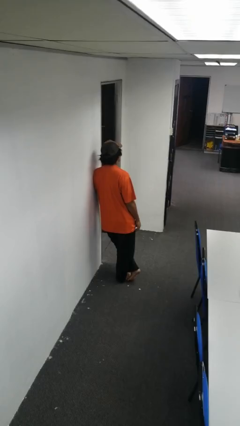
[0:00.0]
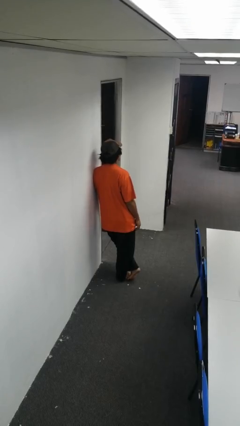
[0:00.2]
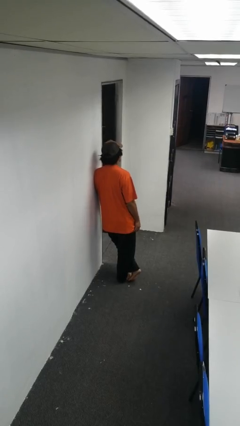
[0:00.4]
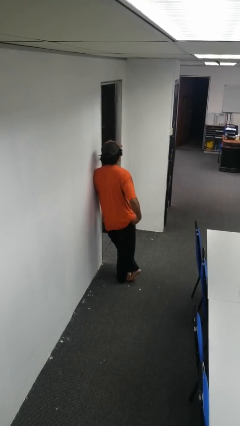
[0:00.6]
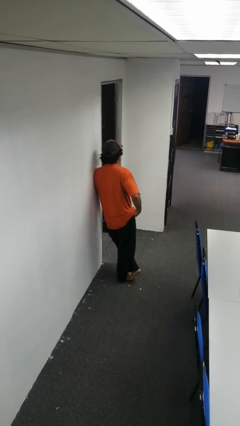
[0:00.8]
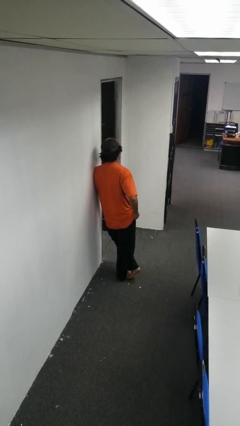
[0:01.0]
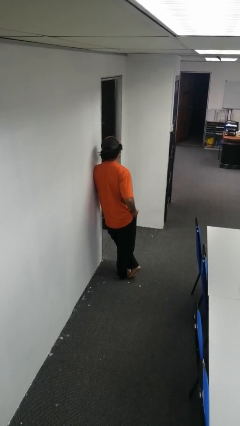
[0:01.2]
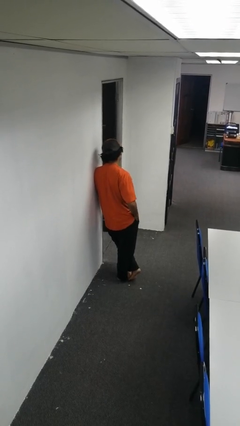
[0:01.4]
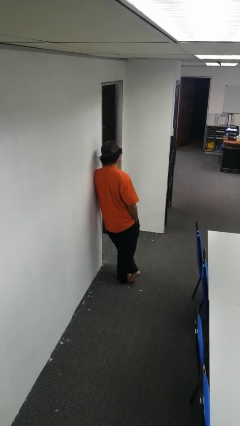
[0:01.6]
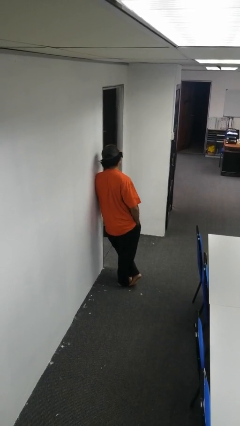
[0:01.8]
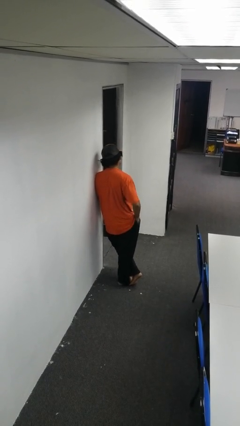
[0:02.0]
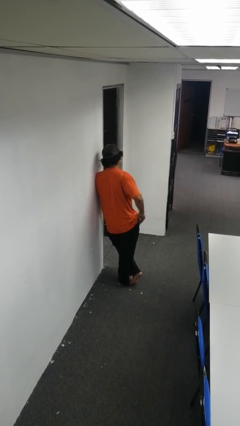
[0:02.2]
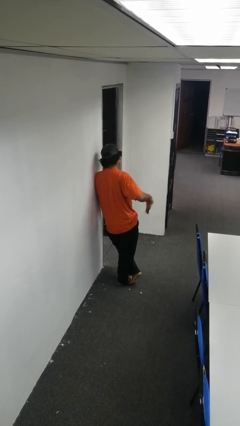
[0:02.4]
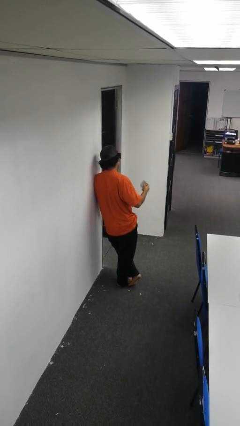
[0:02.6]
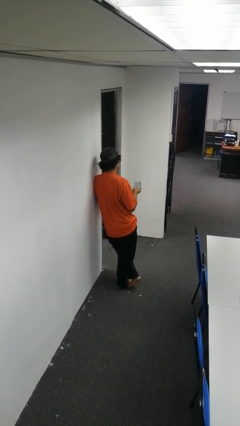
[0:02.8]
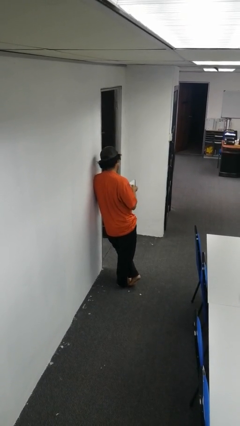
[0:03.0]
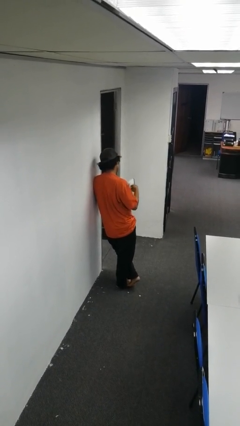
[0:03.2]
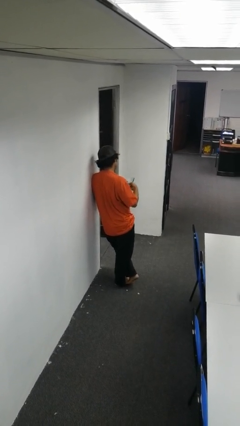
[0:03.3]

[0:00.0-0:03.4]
person takes phone from pocket

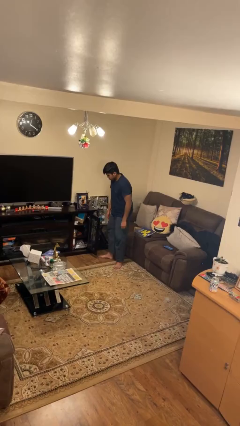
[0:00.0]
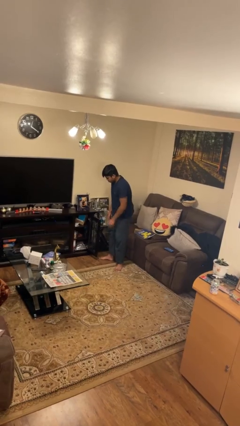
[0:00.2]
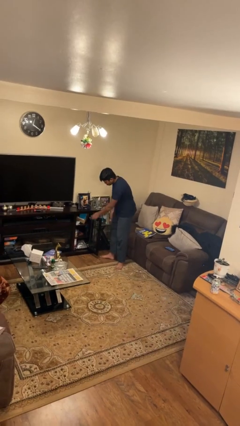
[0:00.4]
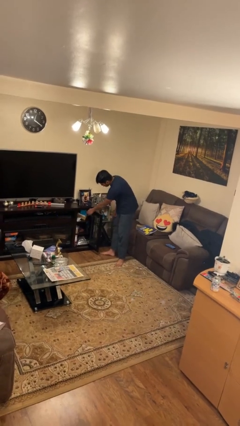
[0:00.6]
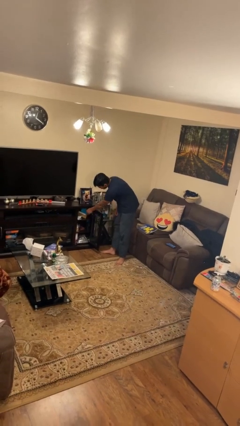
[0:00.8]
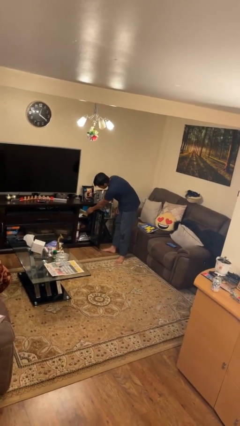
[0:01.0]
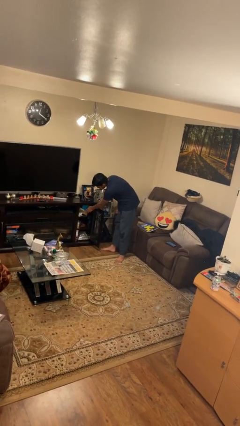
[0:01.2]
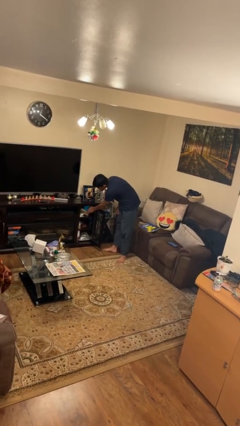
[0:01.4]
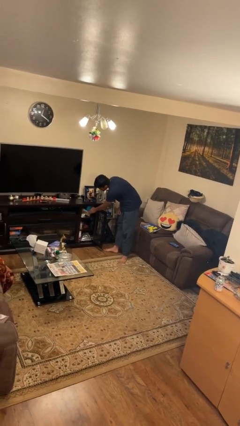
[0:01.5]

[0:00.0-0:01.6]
person searches in cabinet

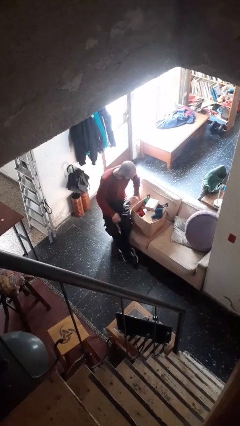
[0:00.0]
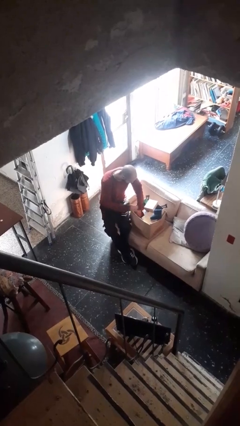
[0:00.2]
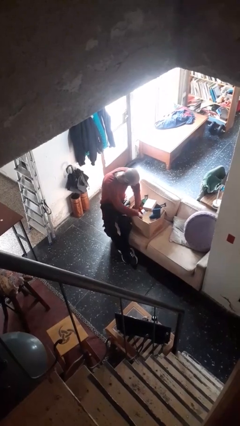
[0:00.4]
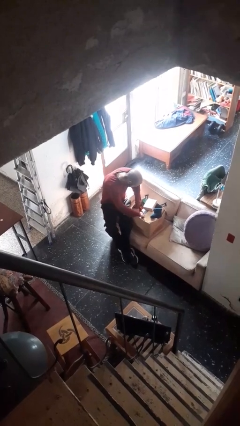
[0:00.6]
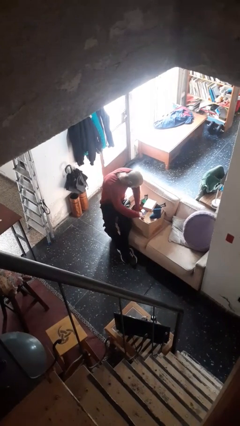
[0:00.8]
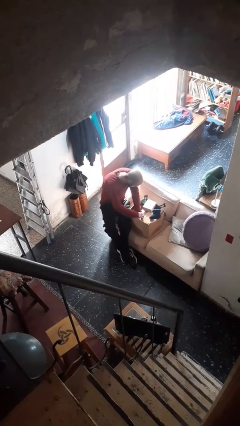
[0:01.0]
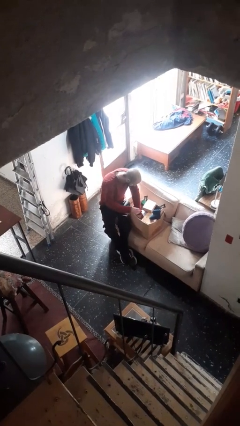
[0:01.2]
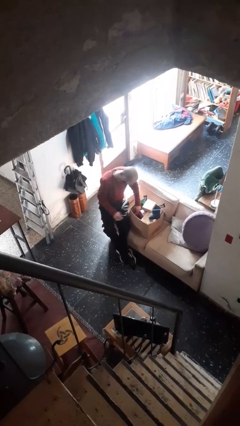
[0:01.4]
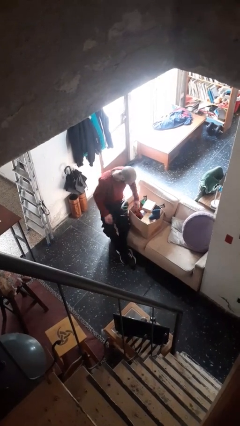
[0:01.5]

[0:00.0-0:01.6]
person searches in box

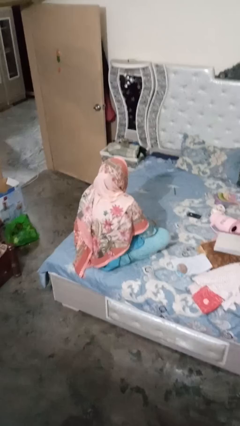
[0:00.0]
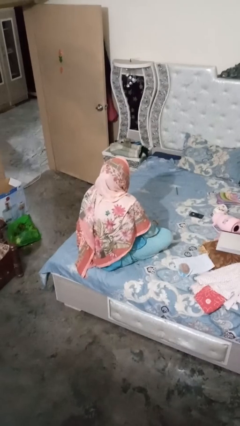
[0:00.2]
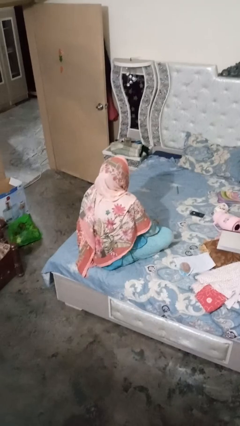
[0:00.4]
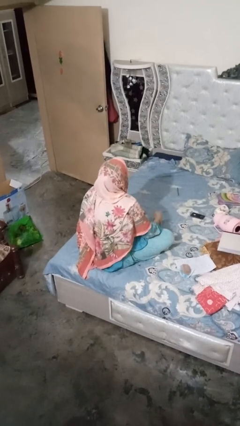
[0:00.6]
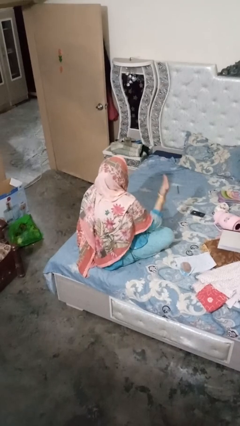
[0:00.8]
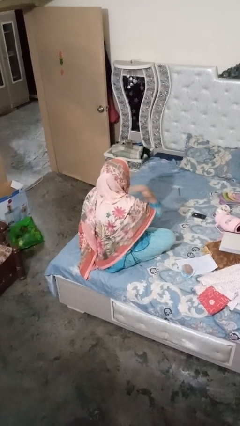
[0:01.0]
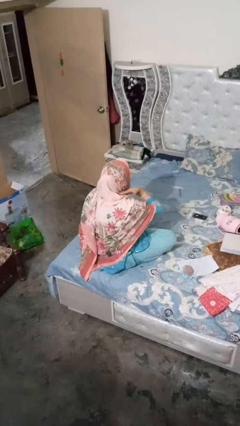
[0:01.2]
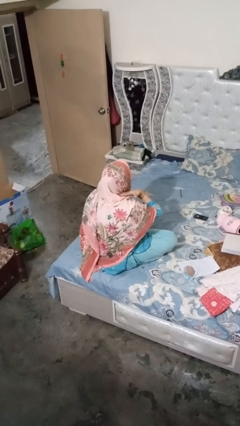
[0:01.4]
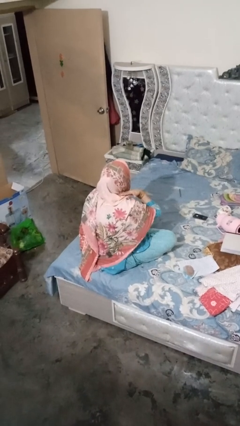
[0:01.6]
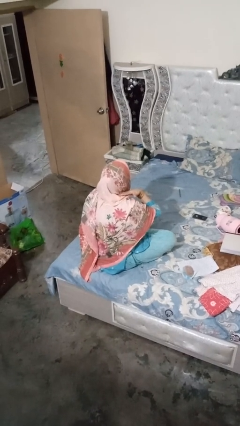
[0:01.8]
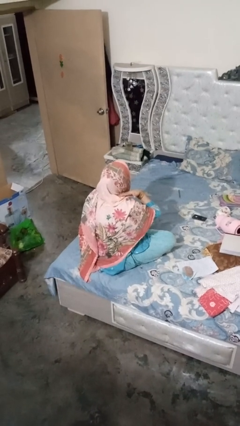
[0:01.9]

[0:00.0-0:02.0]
person gestures cut

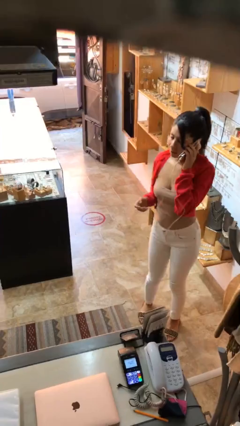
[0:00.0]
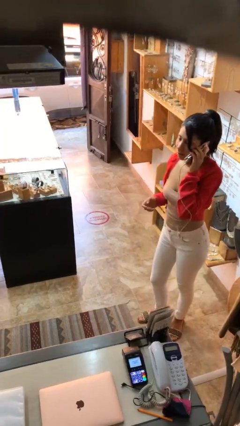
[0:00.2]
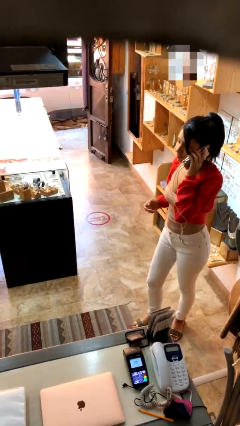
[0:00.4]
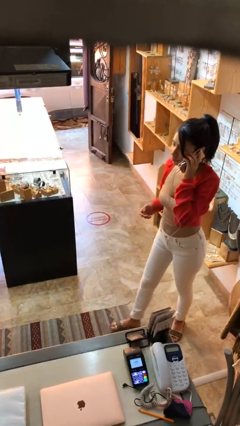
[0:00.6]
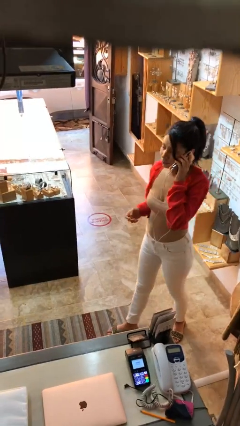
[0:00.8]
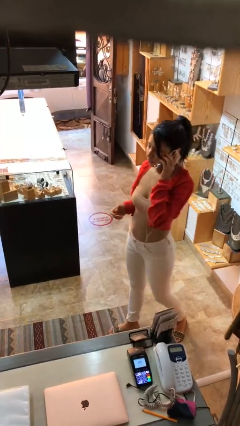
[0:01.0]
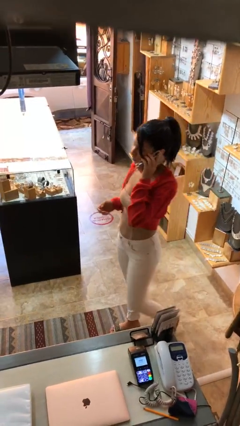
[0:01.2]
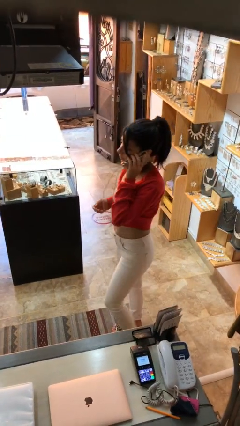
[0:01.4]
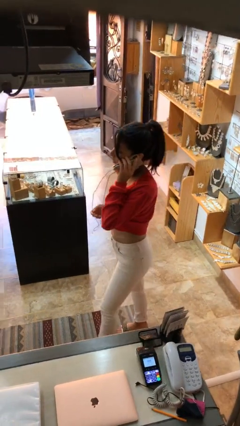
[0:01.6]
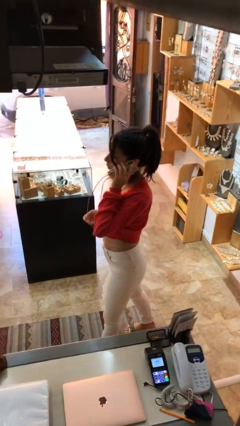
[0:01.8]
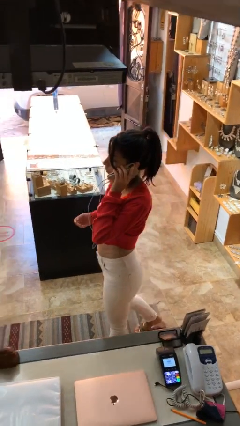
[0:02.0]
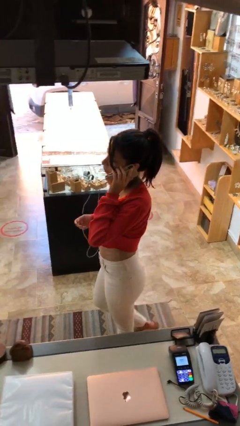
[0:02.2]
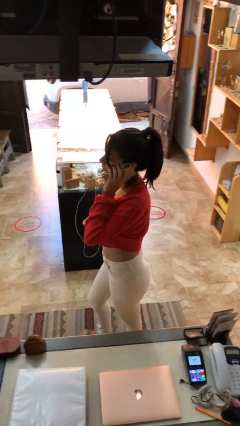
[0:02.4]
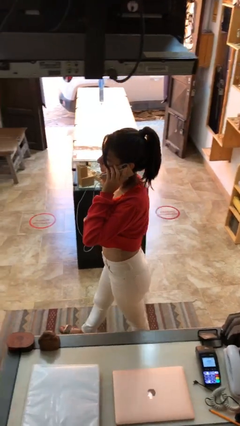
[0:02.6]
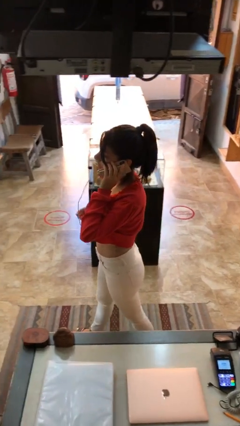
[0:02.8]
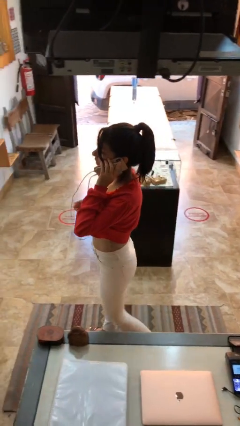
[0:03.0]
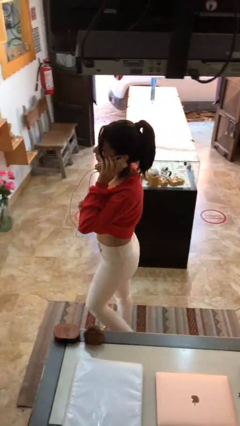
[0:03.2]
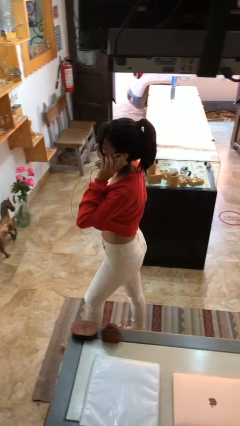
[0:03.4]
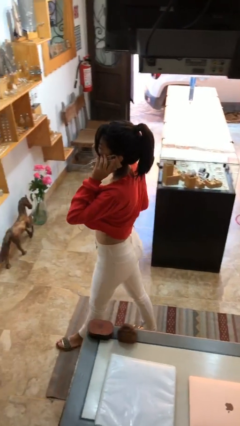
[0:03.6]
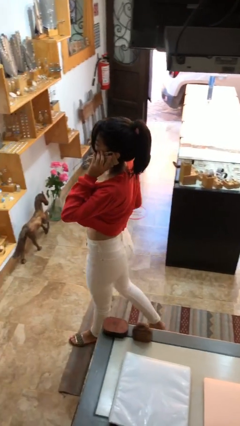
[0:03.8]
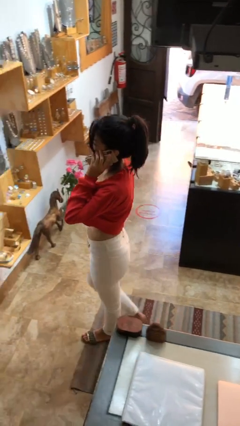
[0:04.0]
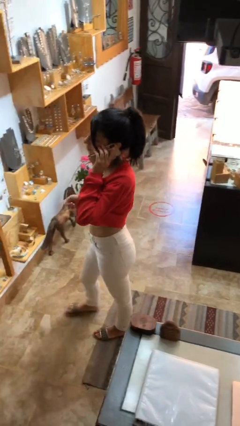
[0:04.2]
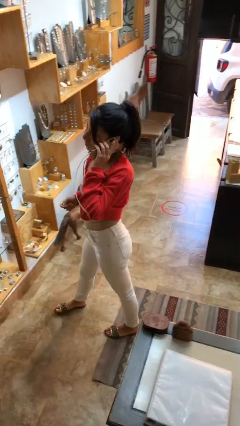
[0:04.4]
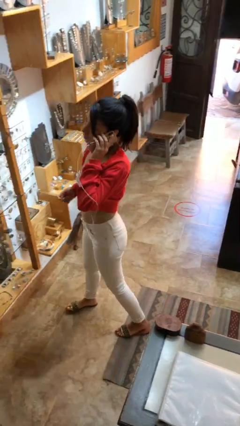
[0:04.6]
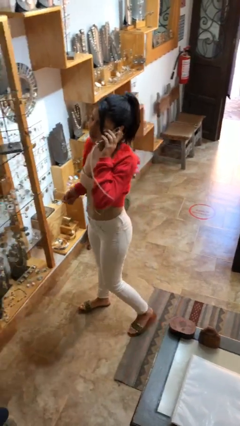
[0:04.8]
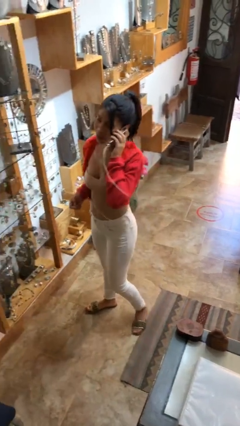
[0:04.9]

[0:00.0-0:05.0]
person talks on phone

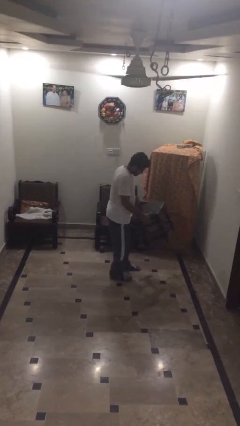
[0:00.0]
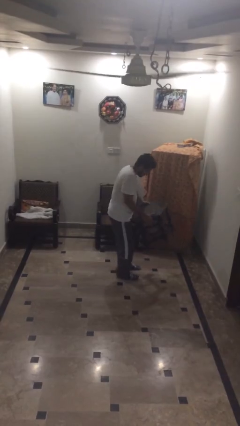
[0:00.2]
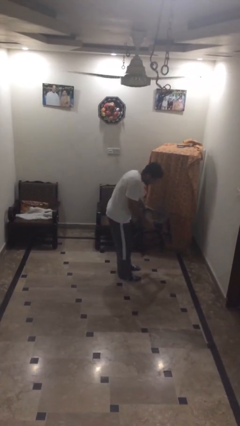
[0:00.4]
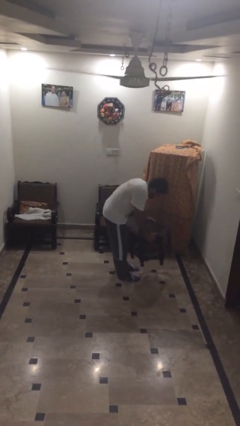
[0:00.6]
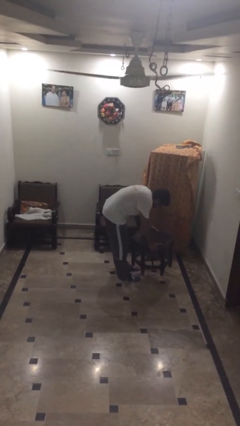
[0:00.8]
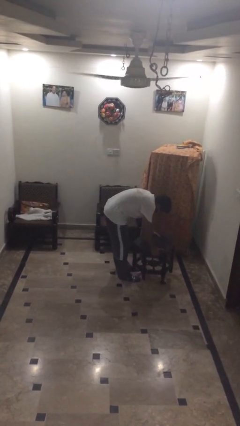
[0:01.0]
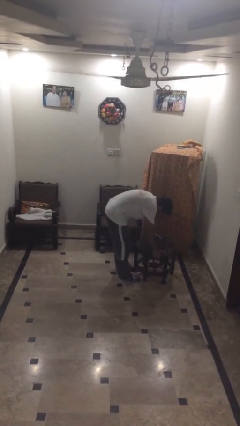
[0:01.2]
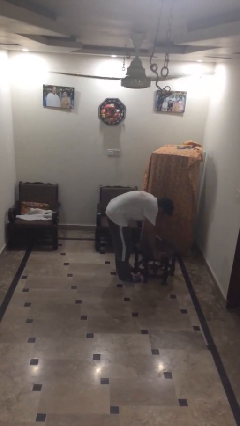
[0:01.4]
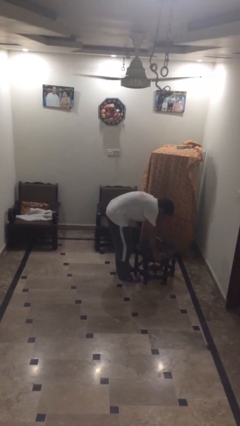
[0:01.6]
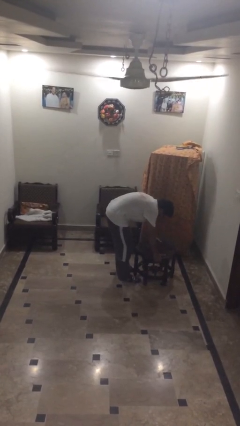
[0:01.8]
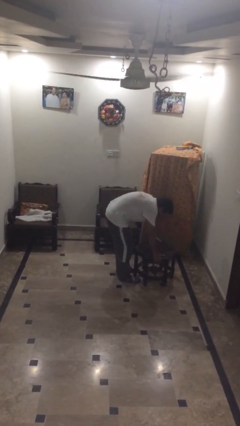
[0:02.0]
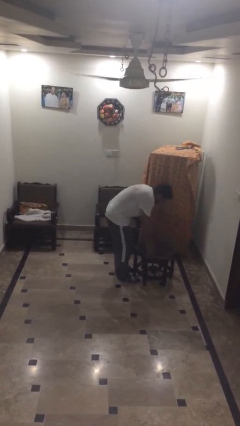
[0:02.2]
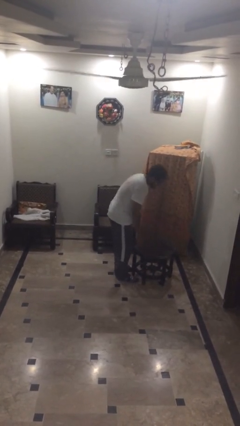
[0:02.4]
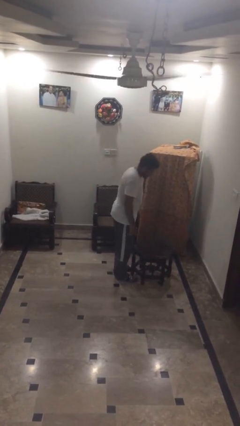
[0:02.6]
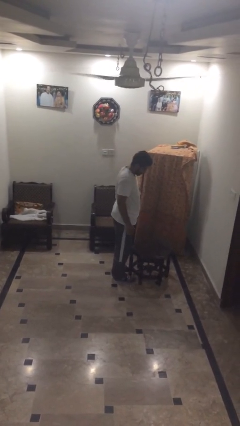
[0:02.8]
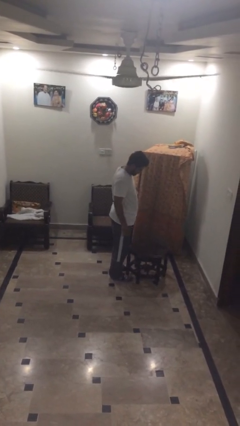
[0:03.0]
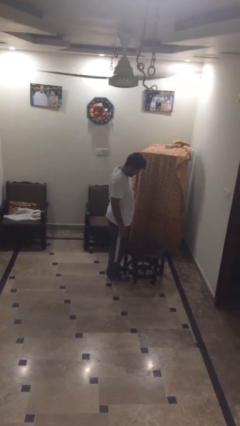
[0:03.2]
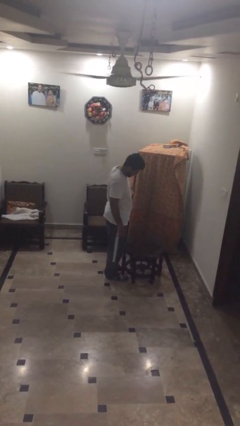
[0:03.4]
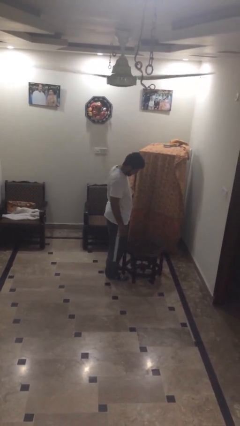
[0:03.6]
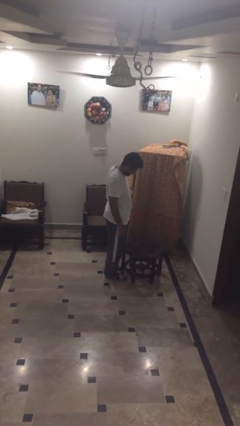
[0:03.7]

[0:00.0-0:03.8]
person puts down object on floor
